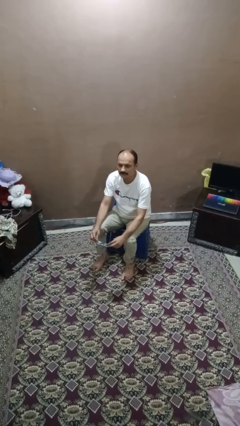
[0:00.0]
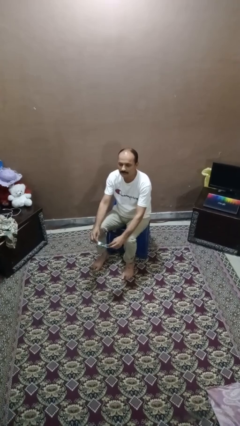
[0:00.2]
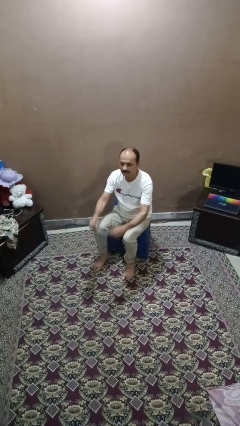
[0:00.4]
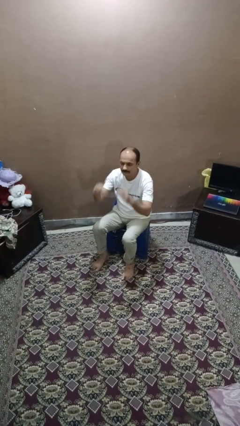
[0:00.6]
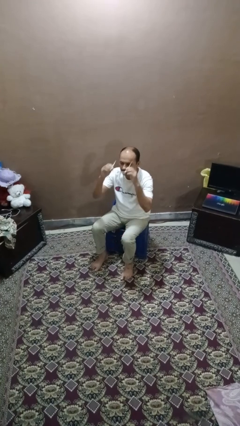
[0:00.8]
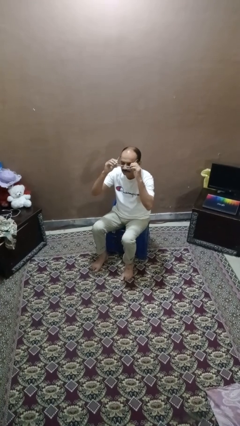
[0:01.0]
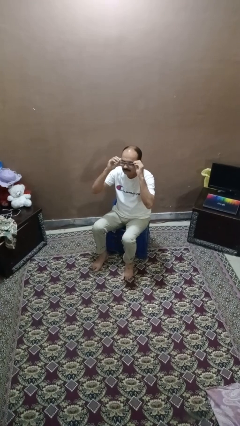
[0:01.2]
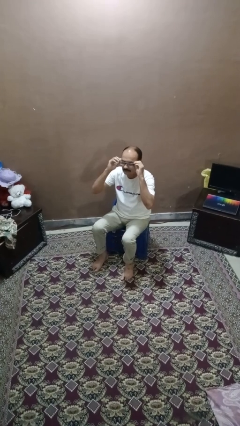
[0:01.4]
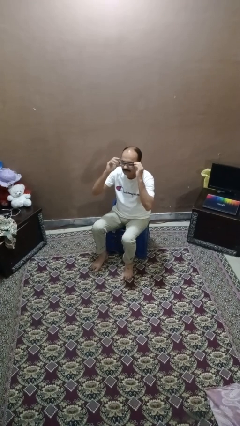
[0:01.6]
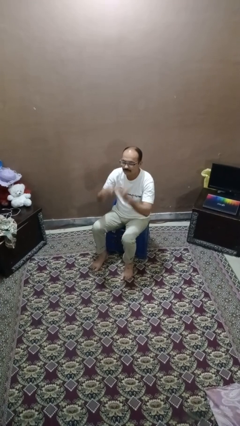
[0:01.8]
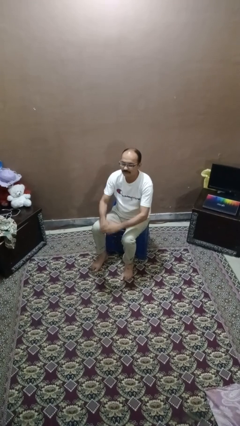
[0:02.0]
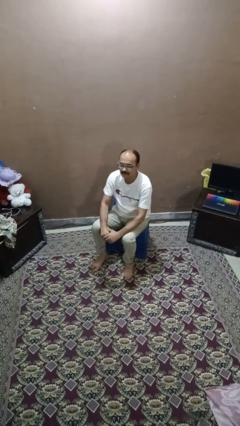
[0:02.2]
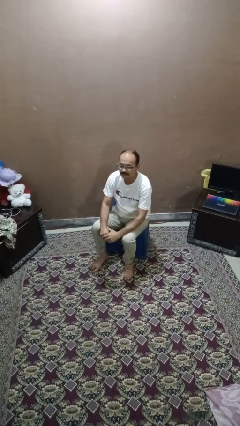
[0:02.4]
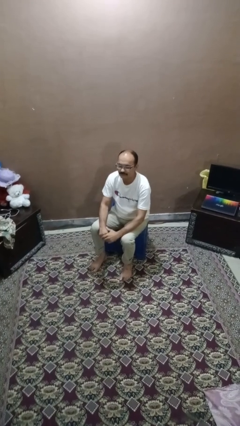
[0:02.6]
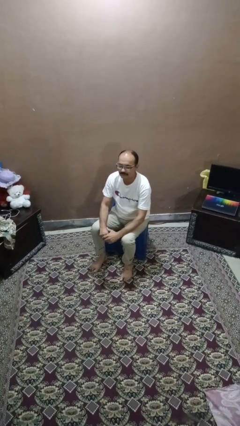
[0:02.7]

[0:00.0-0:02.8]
person puts on glasses

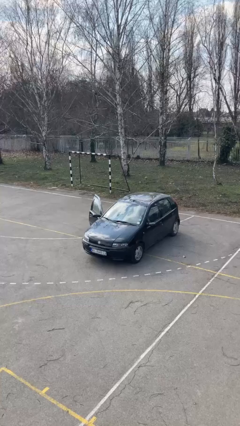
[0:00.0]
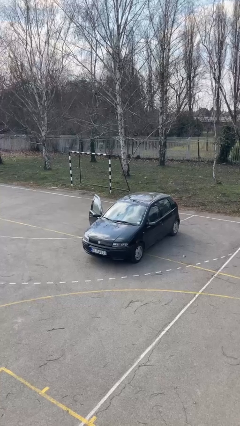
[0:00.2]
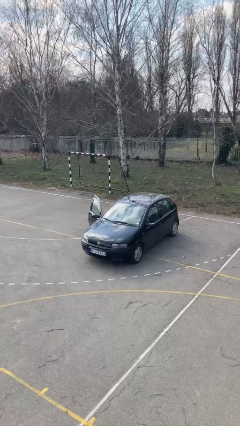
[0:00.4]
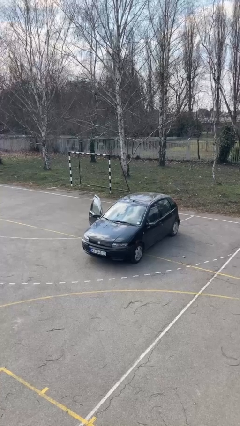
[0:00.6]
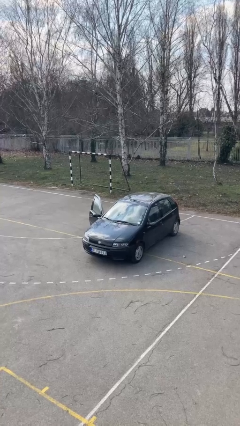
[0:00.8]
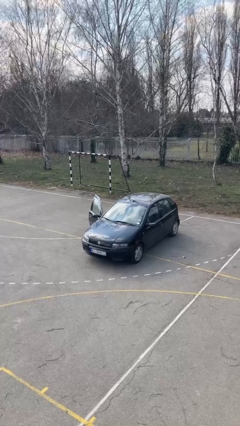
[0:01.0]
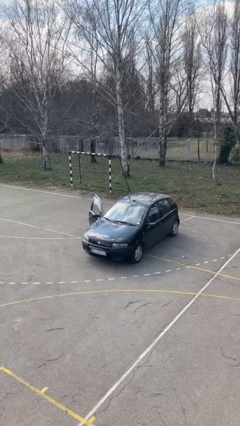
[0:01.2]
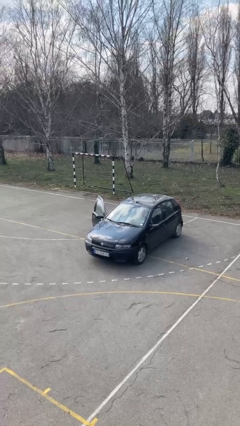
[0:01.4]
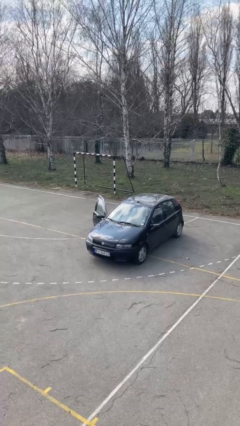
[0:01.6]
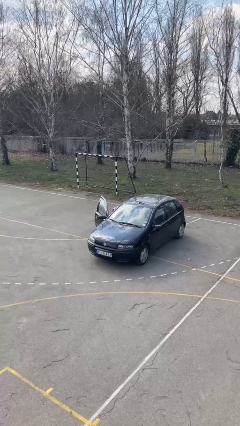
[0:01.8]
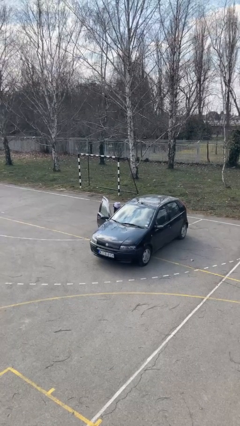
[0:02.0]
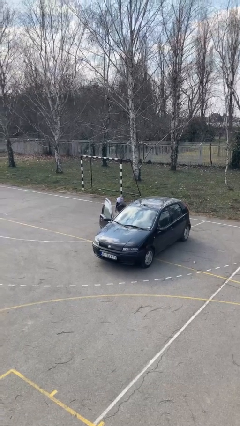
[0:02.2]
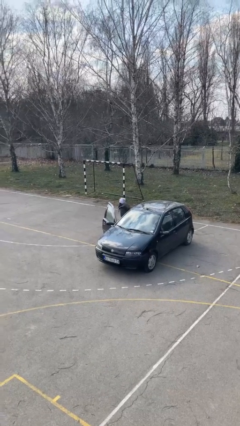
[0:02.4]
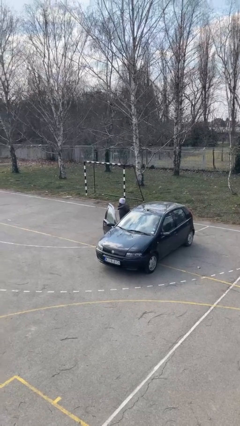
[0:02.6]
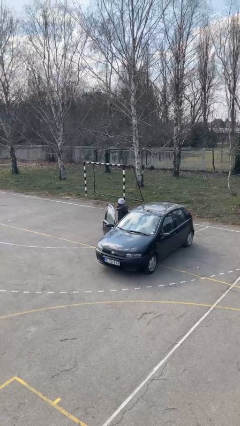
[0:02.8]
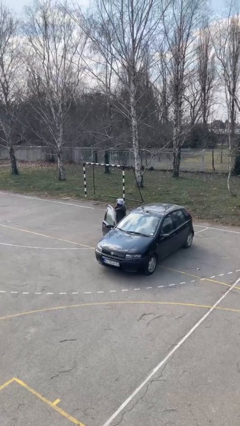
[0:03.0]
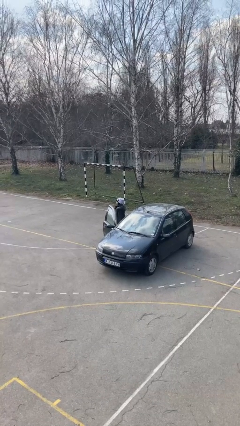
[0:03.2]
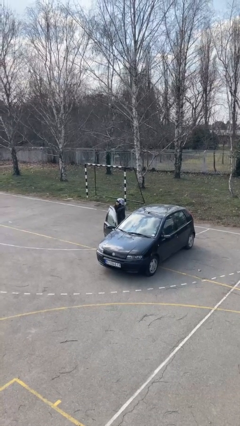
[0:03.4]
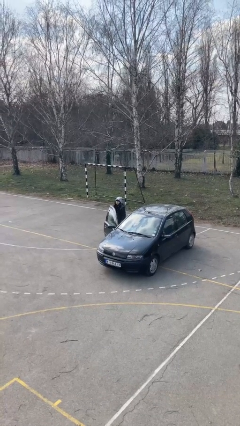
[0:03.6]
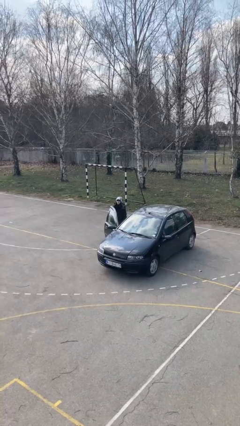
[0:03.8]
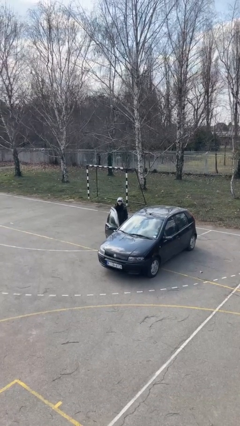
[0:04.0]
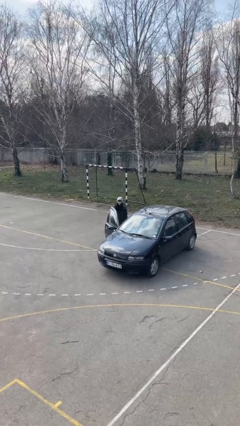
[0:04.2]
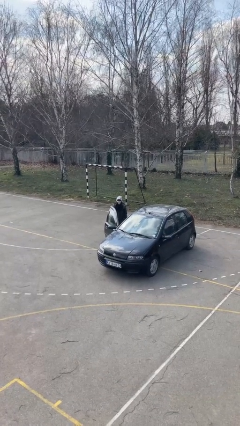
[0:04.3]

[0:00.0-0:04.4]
person exits car

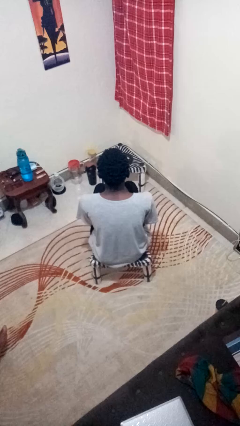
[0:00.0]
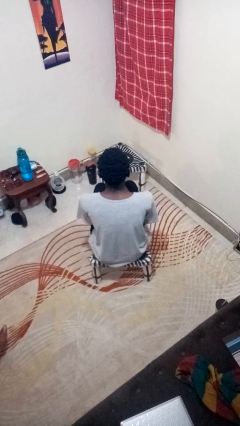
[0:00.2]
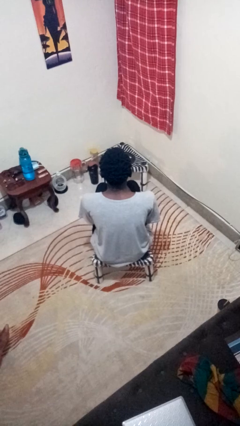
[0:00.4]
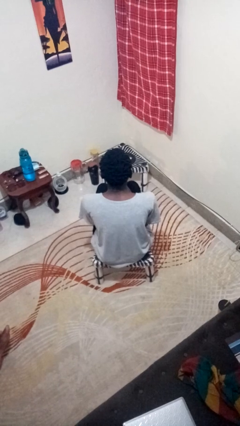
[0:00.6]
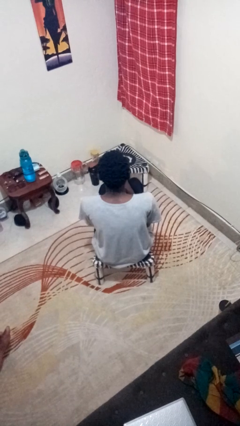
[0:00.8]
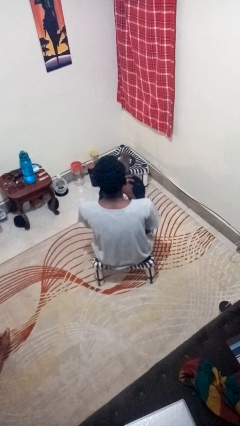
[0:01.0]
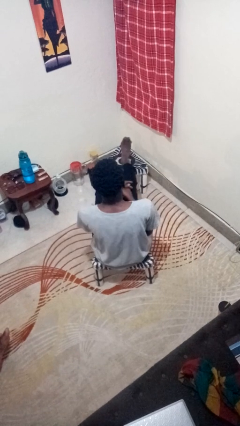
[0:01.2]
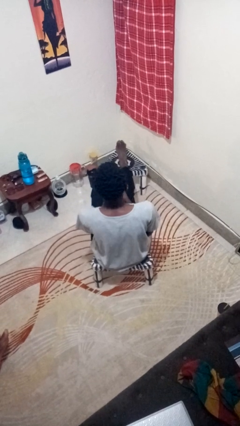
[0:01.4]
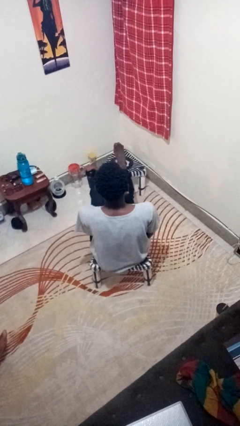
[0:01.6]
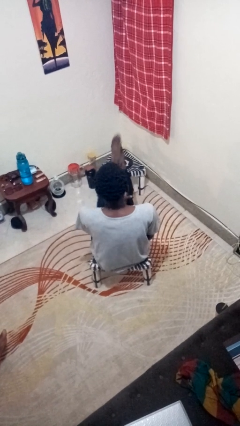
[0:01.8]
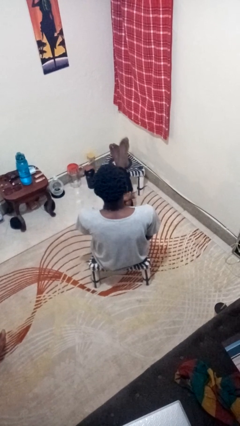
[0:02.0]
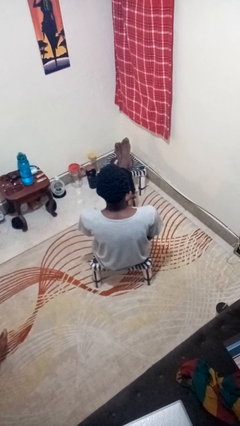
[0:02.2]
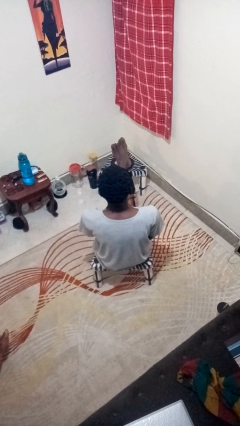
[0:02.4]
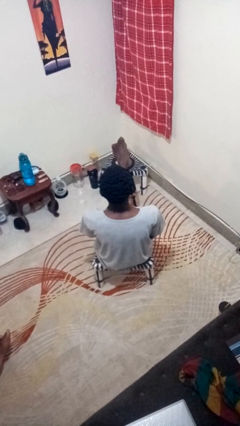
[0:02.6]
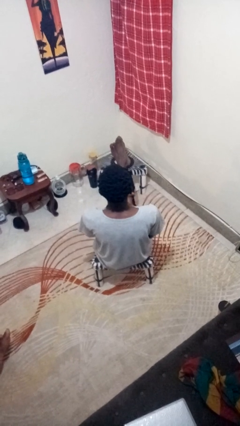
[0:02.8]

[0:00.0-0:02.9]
person puts feet up

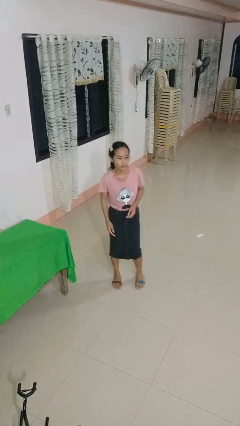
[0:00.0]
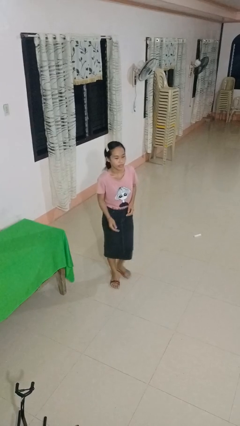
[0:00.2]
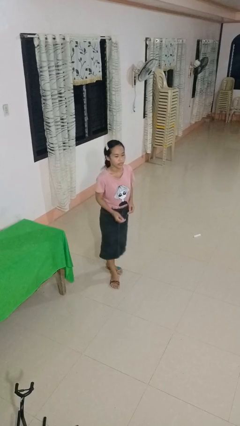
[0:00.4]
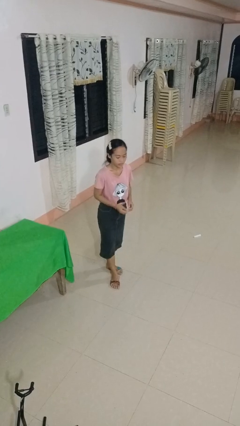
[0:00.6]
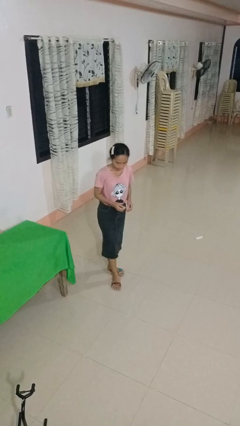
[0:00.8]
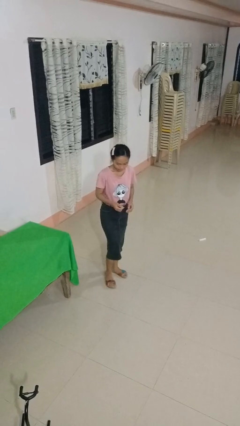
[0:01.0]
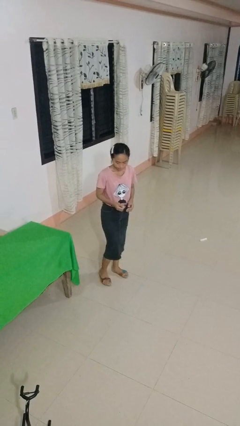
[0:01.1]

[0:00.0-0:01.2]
person slaps hands on thighs

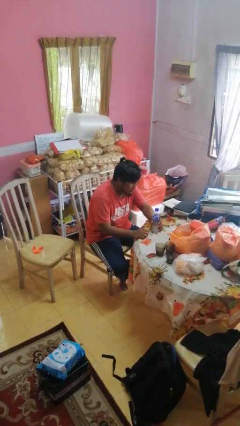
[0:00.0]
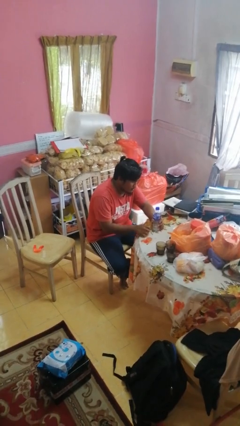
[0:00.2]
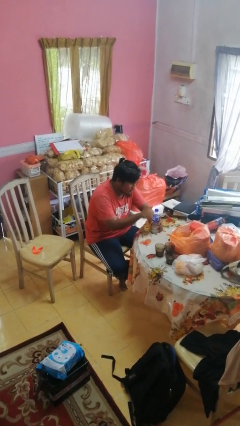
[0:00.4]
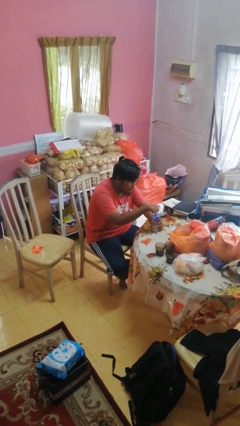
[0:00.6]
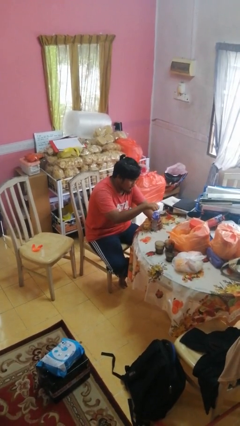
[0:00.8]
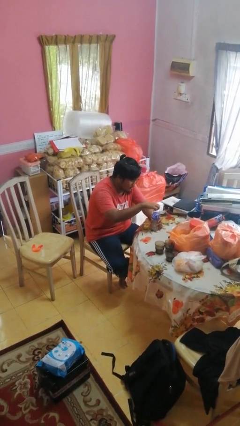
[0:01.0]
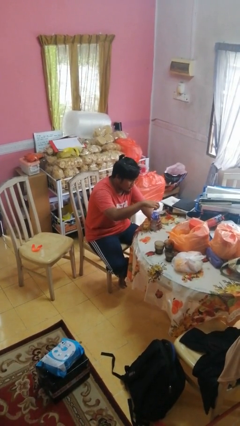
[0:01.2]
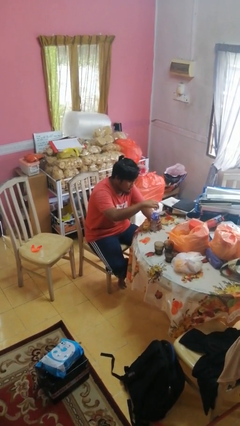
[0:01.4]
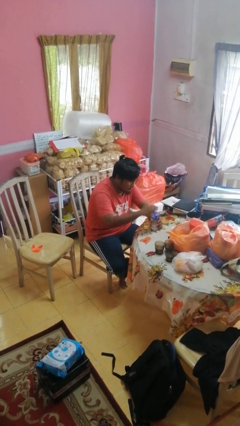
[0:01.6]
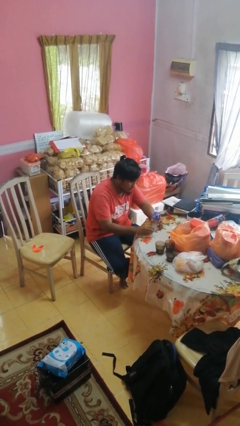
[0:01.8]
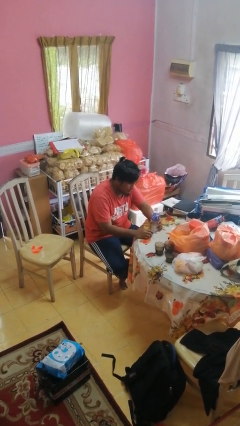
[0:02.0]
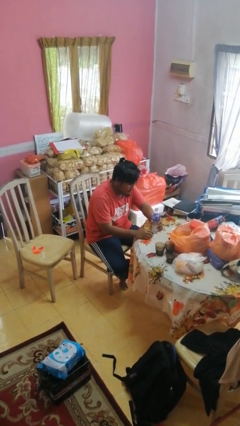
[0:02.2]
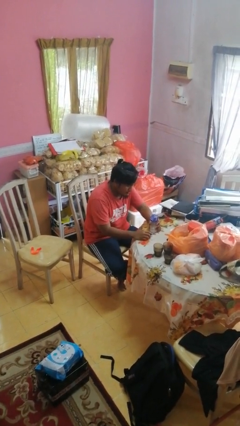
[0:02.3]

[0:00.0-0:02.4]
person unscrews lid from bottle

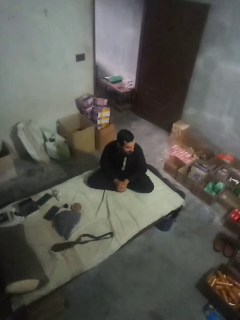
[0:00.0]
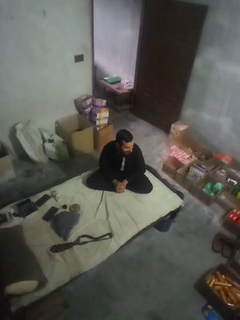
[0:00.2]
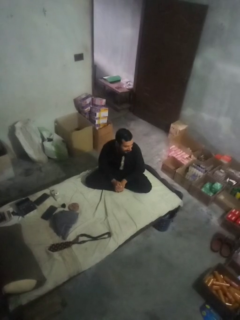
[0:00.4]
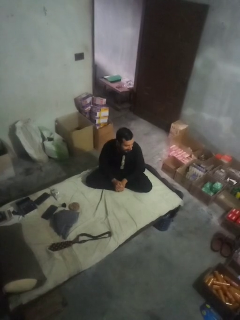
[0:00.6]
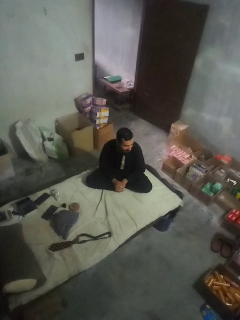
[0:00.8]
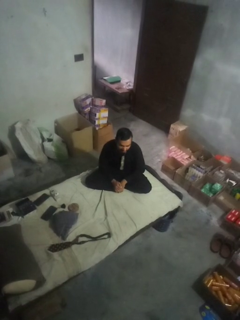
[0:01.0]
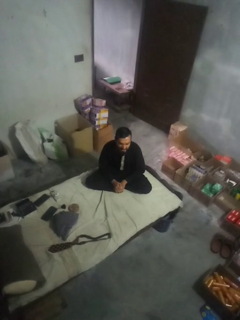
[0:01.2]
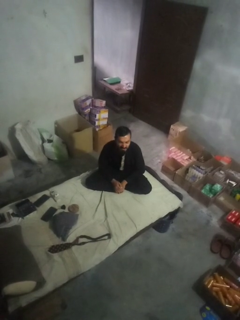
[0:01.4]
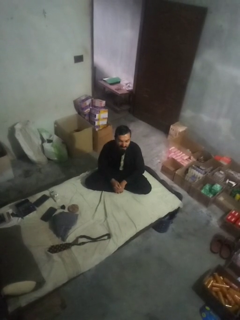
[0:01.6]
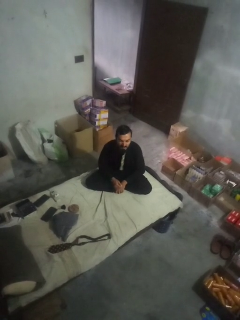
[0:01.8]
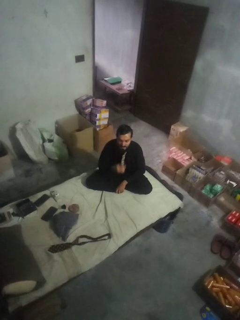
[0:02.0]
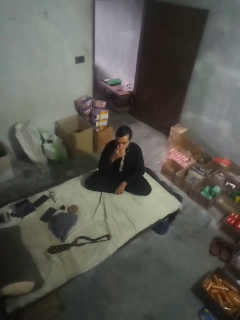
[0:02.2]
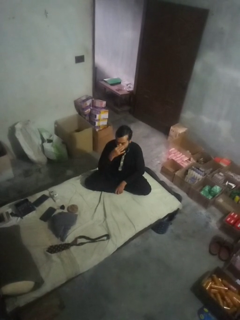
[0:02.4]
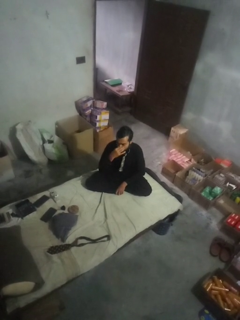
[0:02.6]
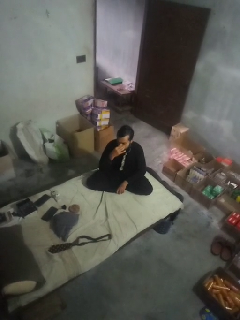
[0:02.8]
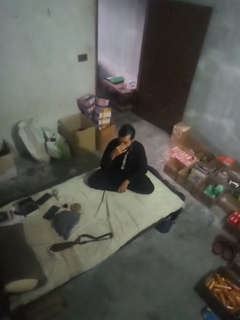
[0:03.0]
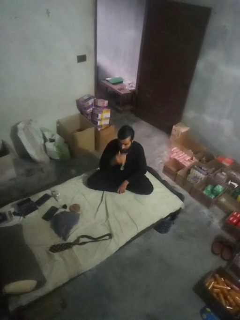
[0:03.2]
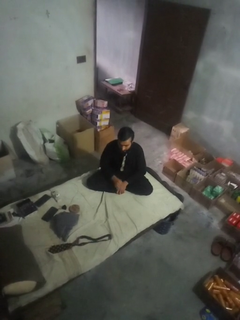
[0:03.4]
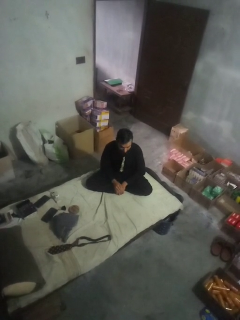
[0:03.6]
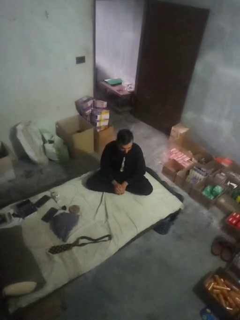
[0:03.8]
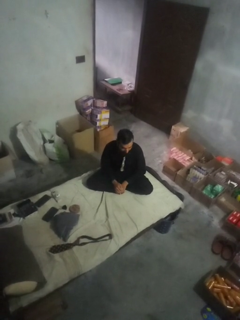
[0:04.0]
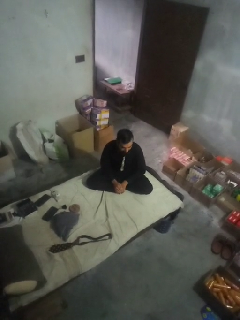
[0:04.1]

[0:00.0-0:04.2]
person blows nose

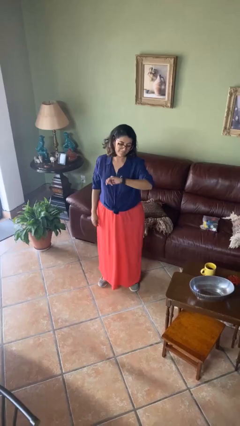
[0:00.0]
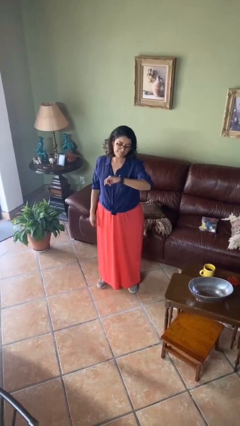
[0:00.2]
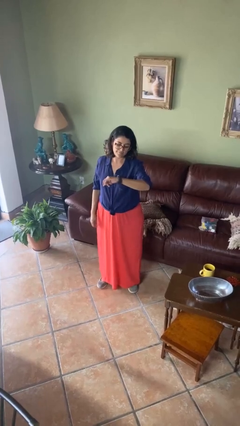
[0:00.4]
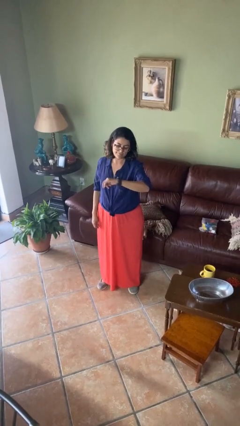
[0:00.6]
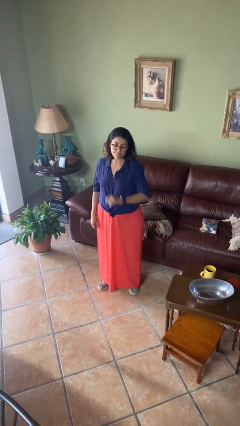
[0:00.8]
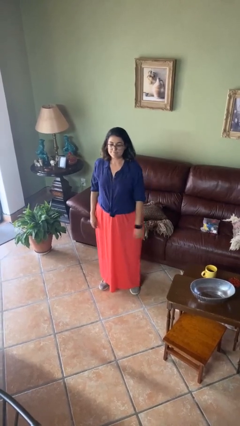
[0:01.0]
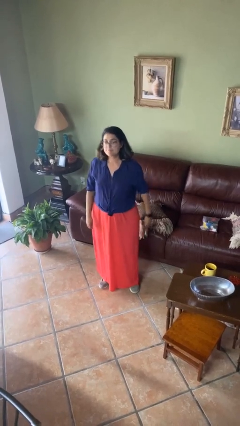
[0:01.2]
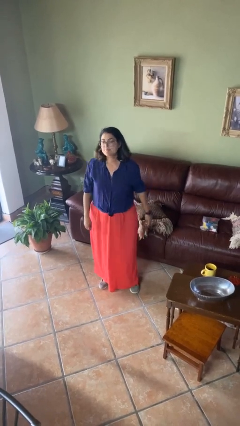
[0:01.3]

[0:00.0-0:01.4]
person looks at wristwatch
